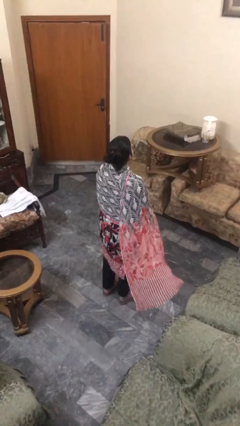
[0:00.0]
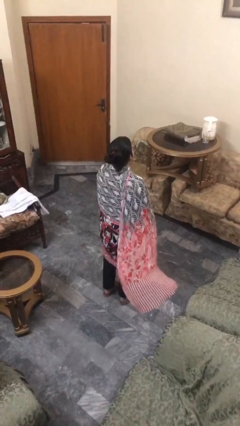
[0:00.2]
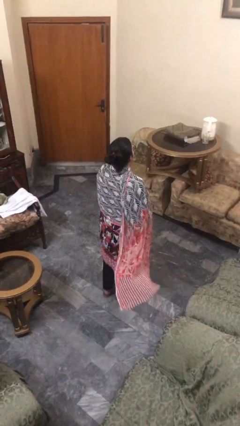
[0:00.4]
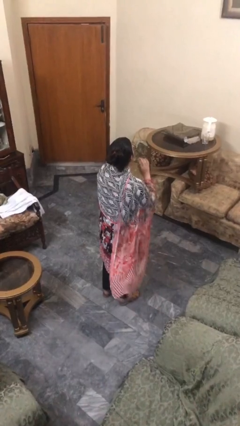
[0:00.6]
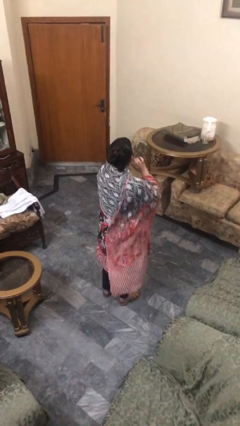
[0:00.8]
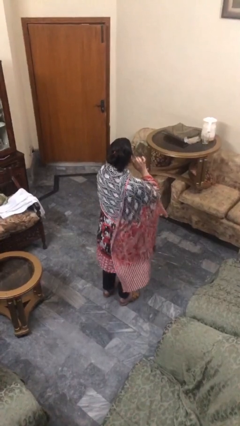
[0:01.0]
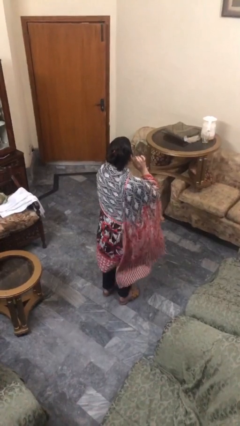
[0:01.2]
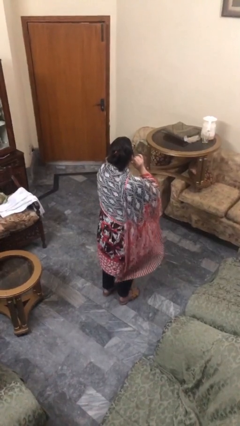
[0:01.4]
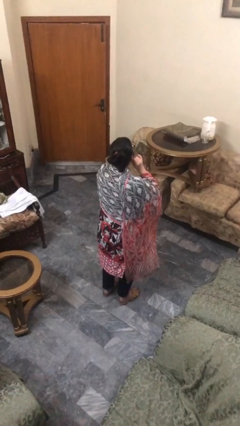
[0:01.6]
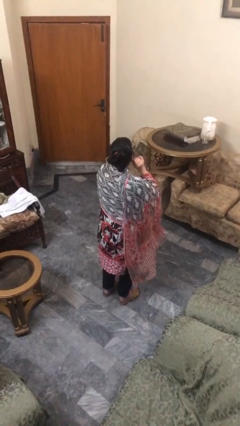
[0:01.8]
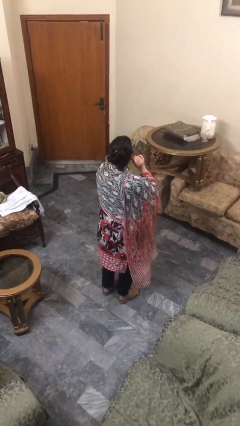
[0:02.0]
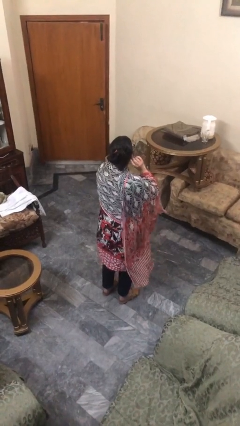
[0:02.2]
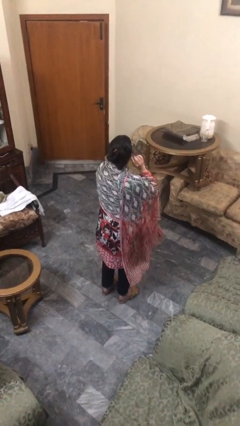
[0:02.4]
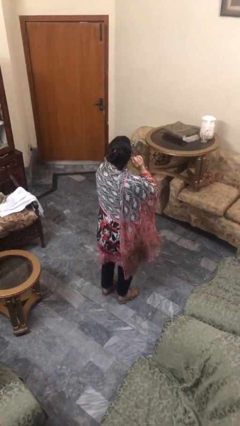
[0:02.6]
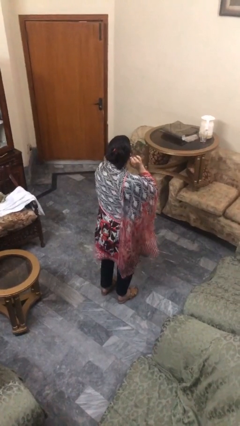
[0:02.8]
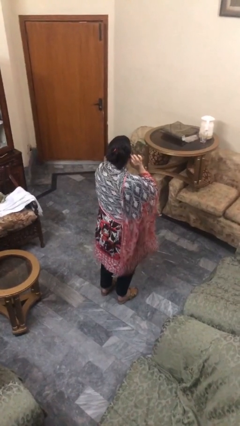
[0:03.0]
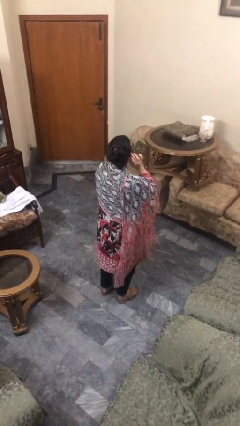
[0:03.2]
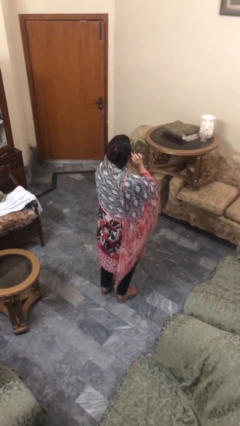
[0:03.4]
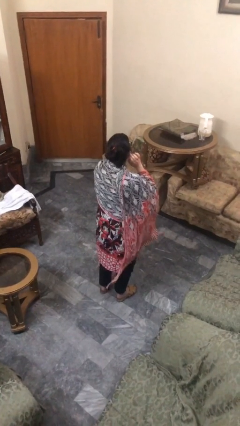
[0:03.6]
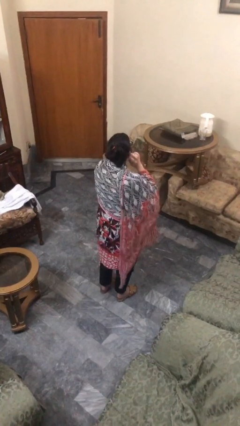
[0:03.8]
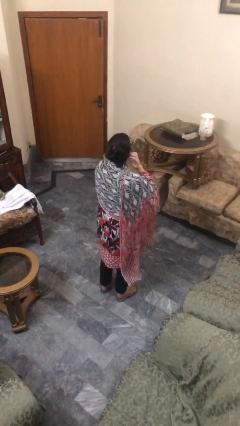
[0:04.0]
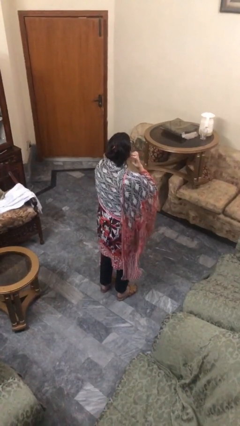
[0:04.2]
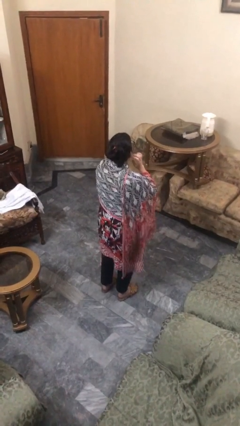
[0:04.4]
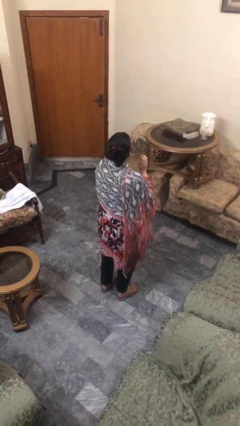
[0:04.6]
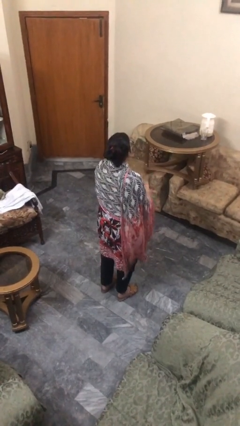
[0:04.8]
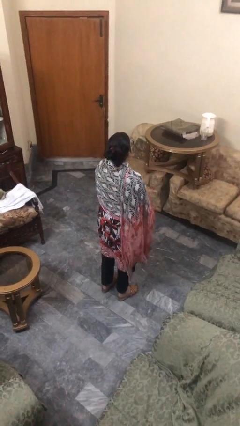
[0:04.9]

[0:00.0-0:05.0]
person touches earlobe

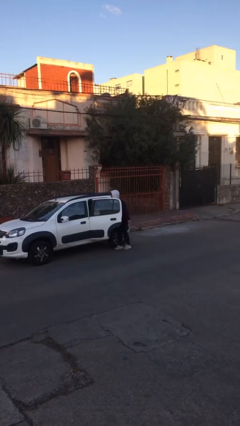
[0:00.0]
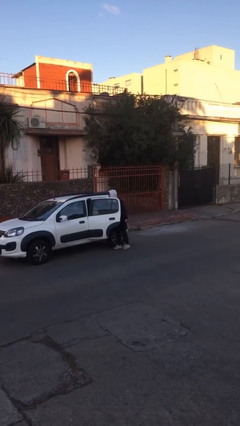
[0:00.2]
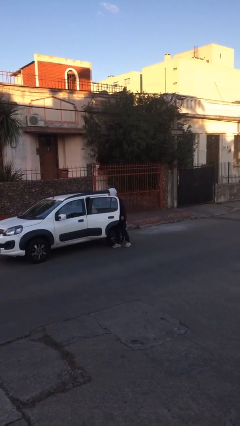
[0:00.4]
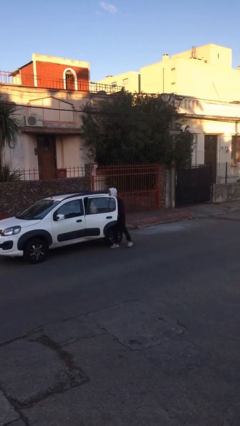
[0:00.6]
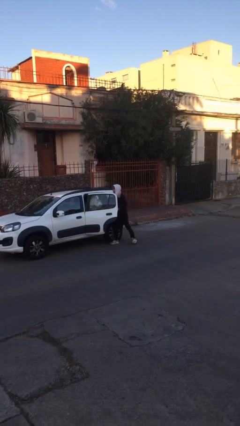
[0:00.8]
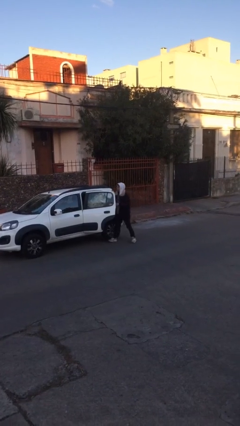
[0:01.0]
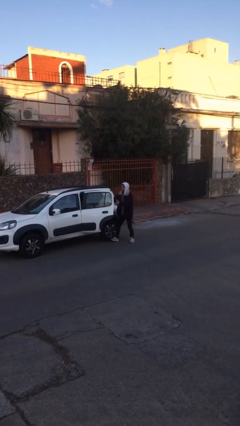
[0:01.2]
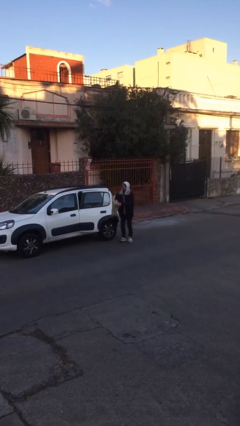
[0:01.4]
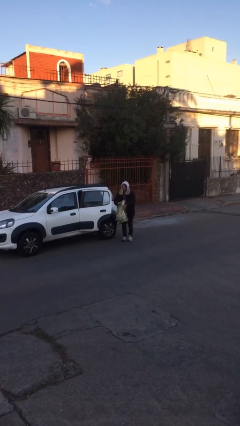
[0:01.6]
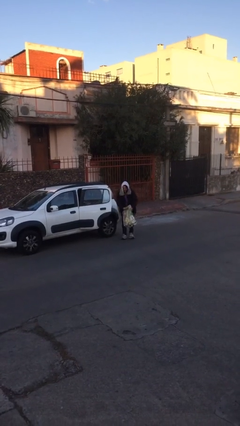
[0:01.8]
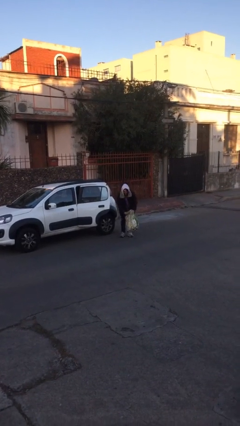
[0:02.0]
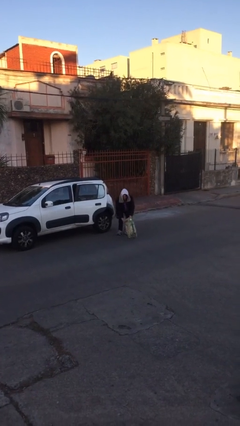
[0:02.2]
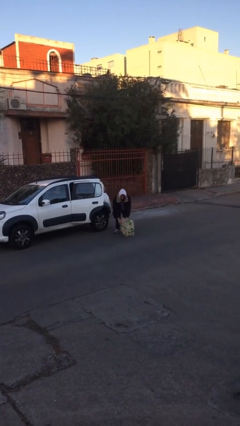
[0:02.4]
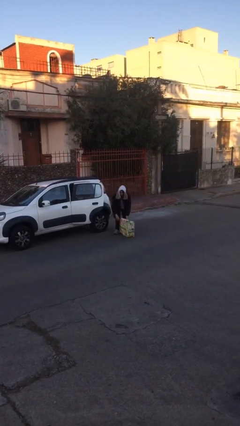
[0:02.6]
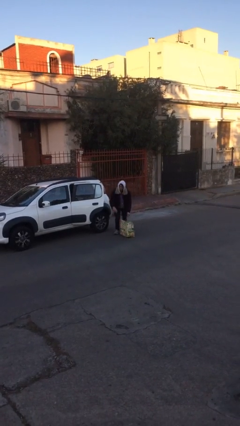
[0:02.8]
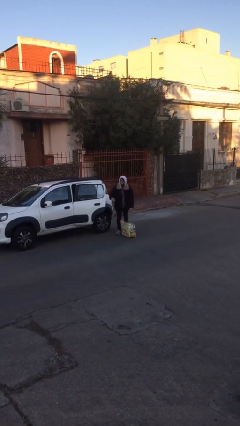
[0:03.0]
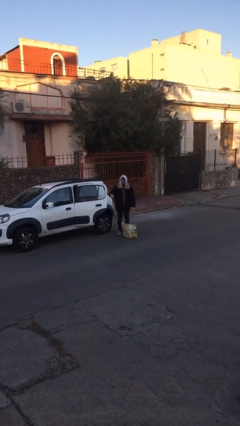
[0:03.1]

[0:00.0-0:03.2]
person unloads car

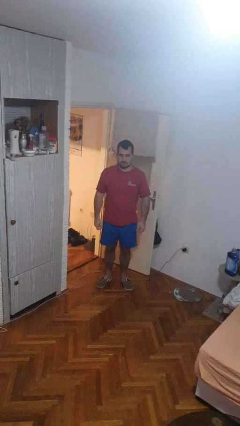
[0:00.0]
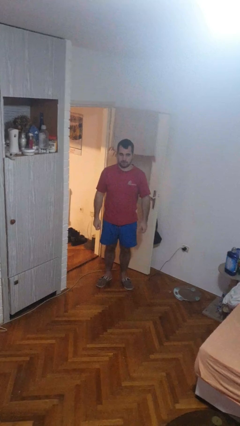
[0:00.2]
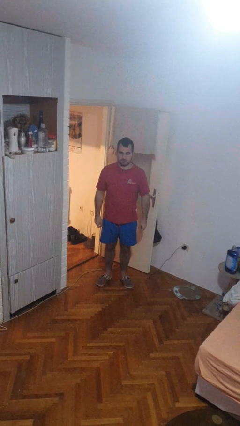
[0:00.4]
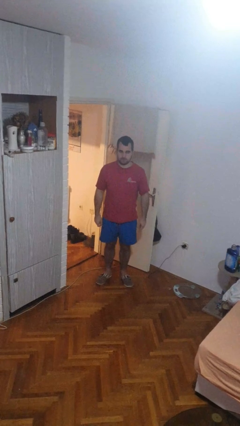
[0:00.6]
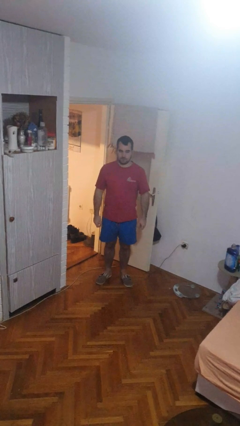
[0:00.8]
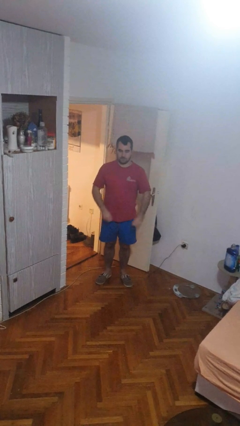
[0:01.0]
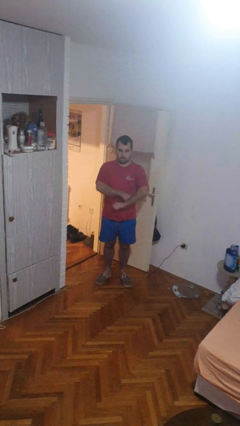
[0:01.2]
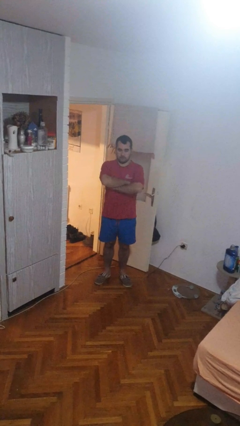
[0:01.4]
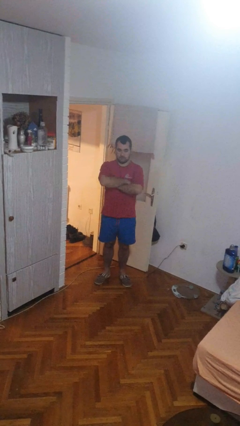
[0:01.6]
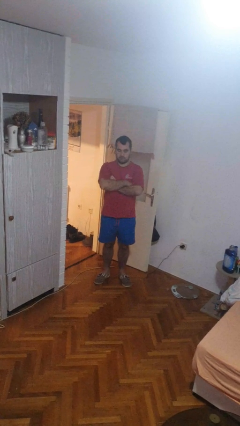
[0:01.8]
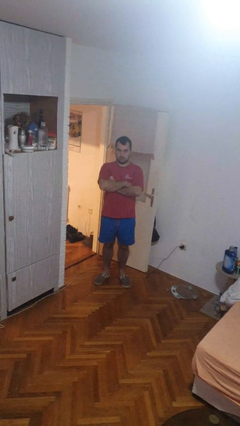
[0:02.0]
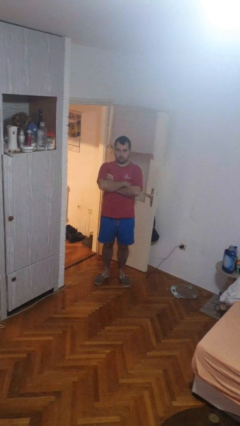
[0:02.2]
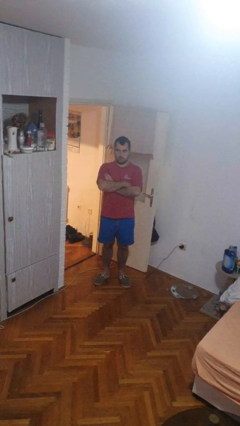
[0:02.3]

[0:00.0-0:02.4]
person crosses arms

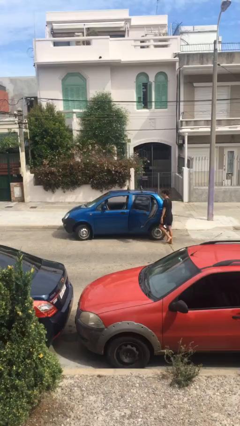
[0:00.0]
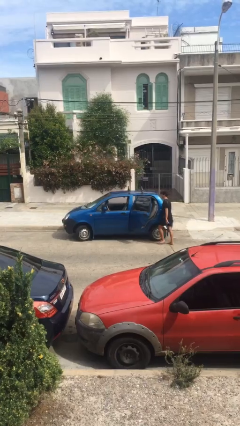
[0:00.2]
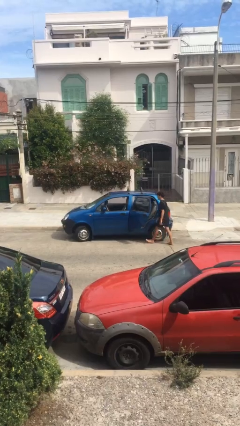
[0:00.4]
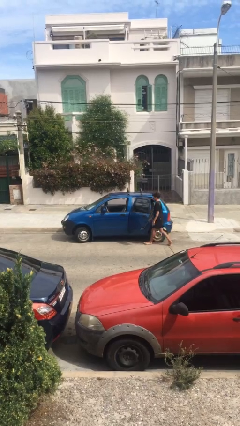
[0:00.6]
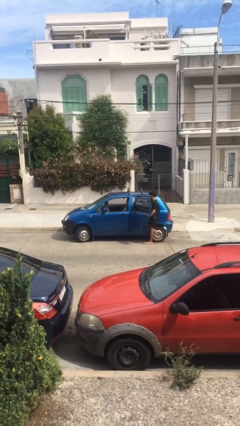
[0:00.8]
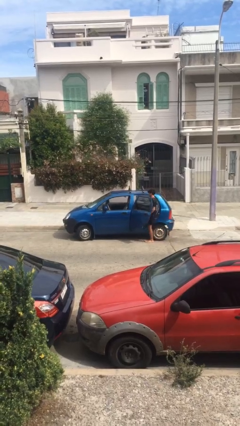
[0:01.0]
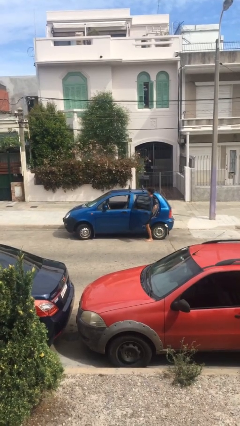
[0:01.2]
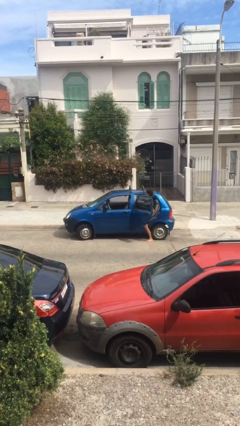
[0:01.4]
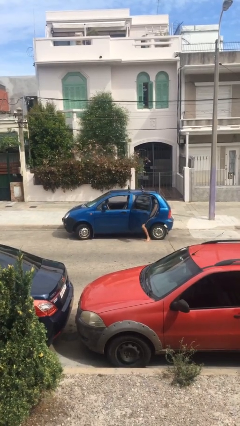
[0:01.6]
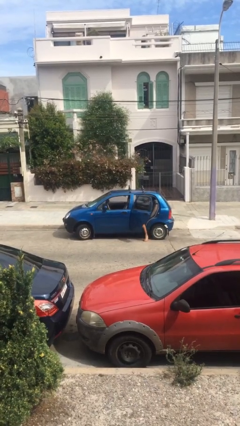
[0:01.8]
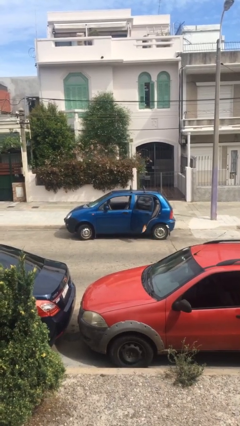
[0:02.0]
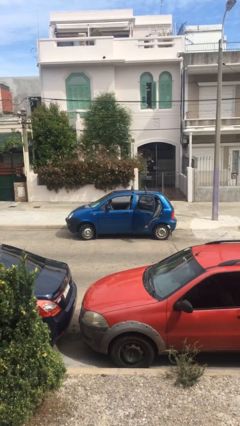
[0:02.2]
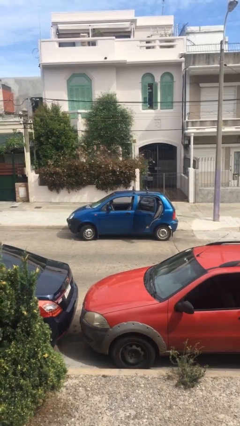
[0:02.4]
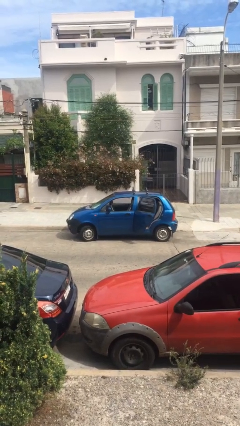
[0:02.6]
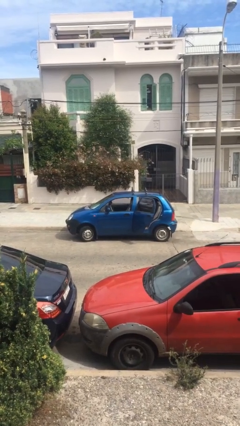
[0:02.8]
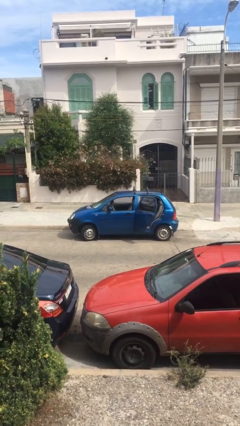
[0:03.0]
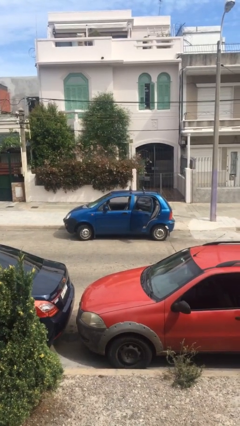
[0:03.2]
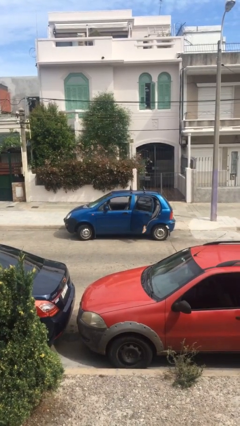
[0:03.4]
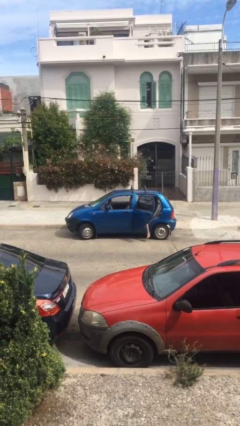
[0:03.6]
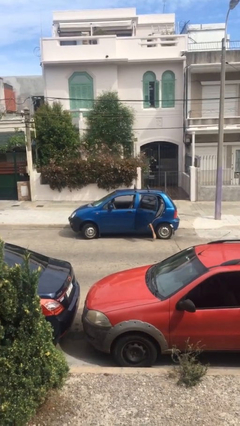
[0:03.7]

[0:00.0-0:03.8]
person enters car

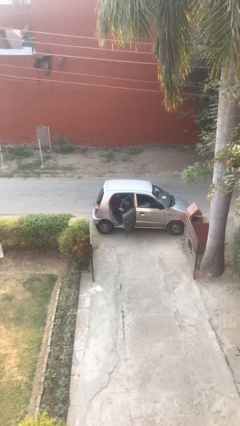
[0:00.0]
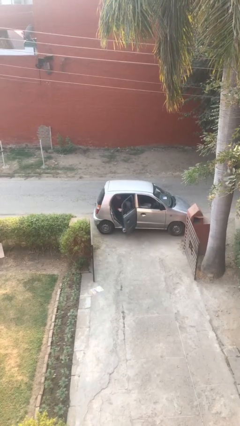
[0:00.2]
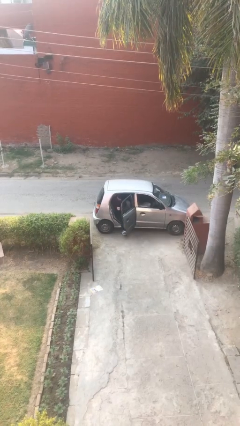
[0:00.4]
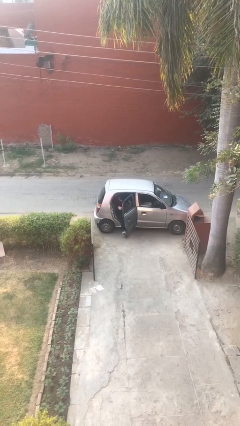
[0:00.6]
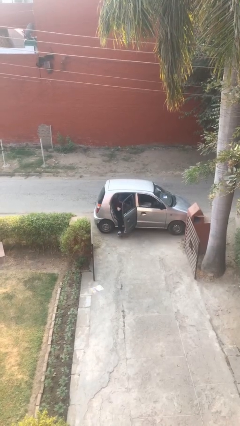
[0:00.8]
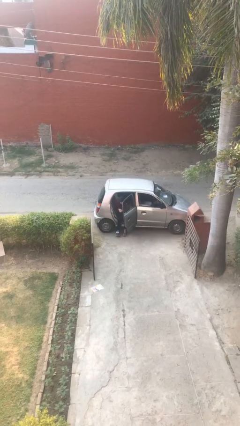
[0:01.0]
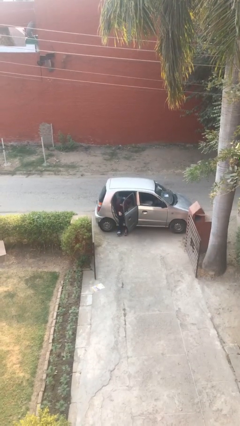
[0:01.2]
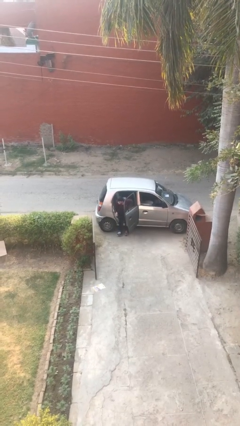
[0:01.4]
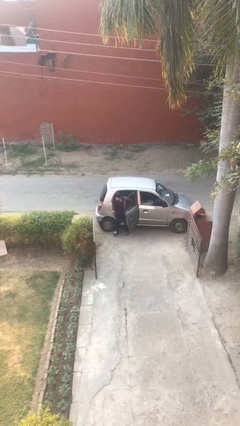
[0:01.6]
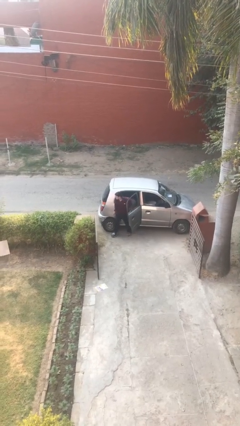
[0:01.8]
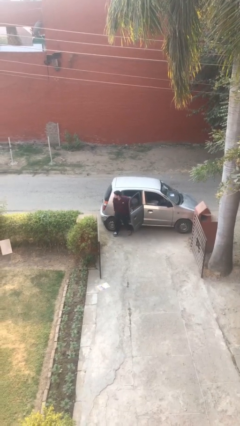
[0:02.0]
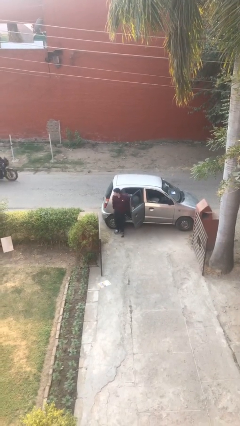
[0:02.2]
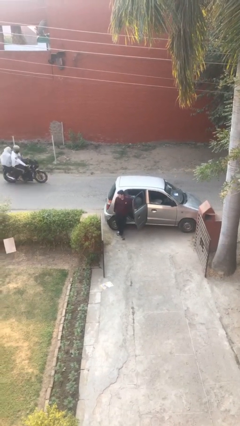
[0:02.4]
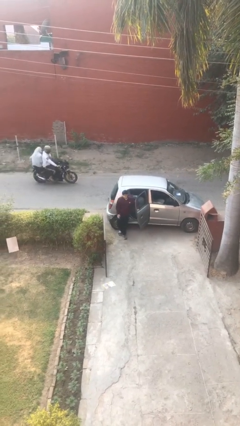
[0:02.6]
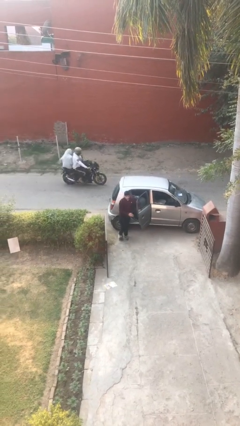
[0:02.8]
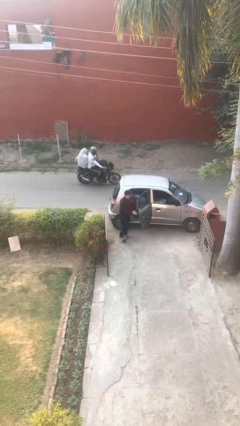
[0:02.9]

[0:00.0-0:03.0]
person exits car
